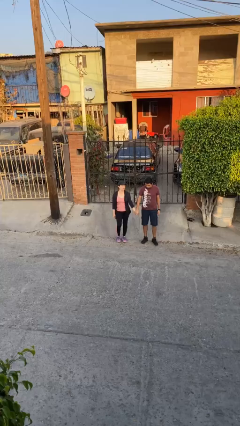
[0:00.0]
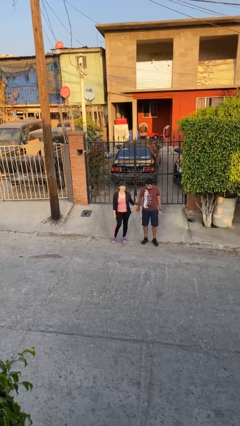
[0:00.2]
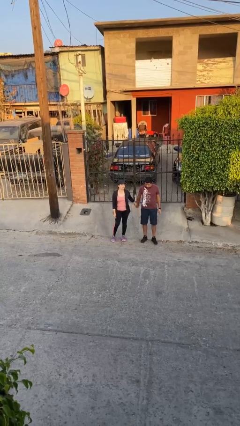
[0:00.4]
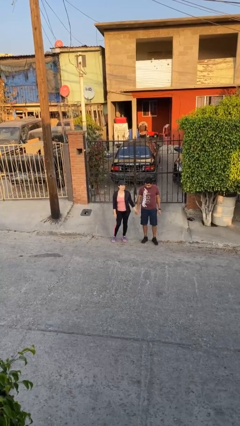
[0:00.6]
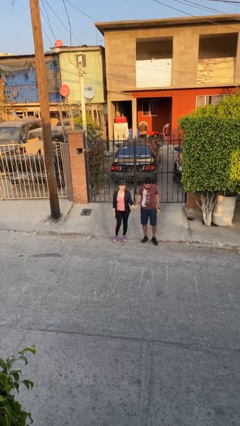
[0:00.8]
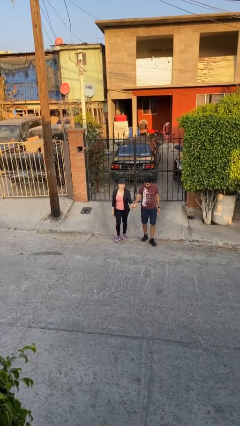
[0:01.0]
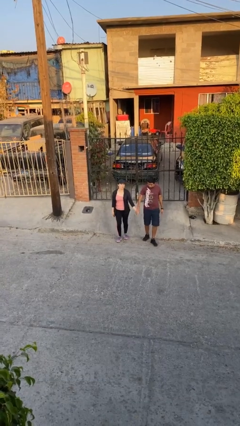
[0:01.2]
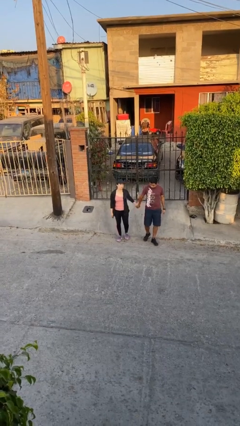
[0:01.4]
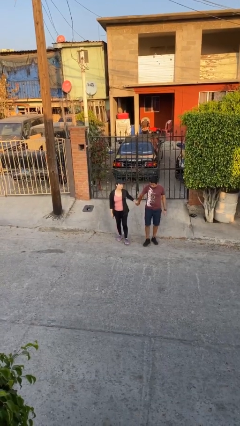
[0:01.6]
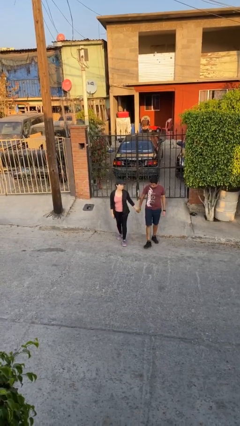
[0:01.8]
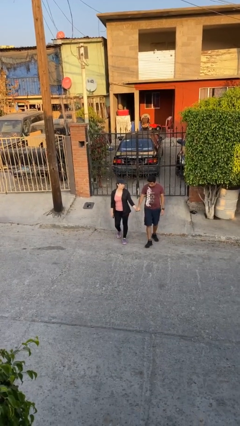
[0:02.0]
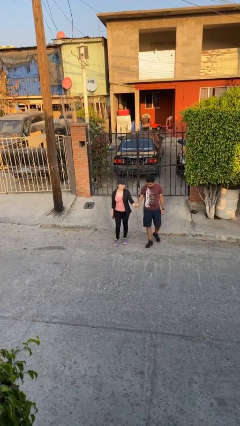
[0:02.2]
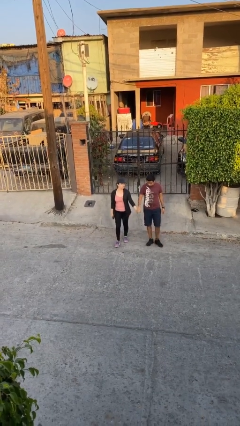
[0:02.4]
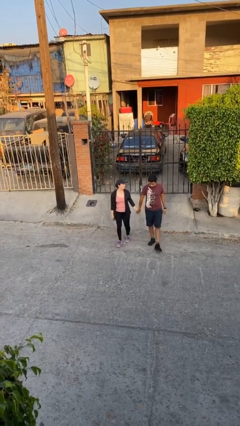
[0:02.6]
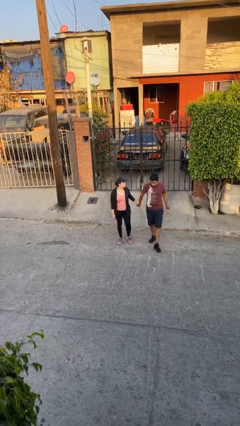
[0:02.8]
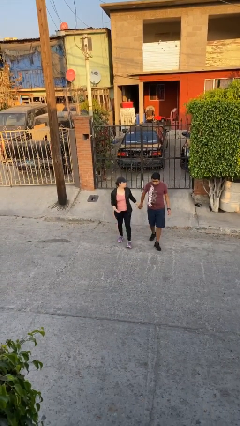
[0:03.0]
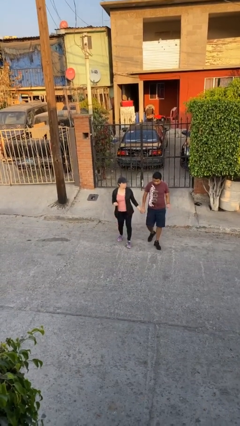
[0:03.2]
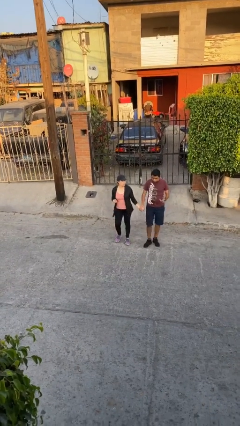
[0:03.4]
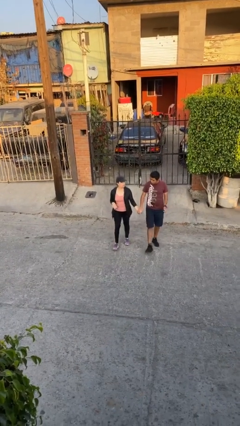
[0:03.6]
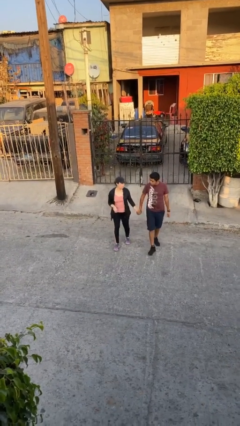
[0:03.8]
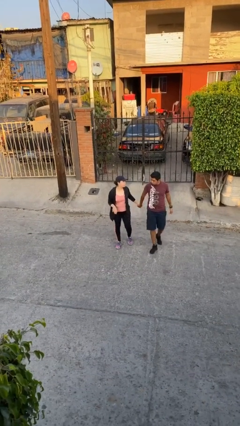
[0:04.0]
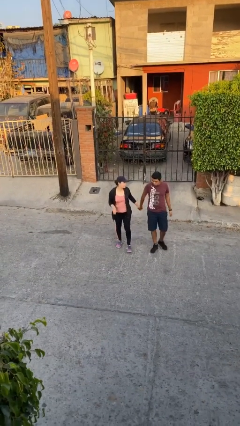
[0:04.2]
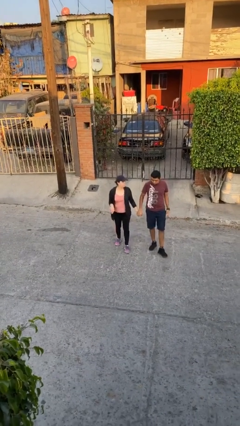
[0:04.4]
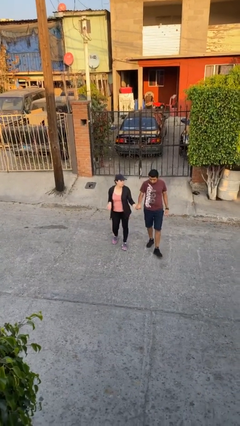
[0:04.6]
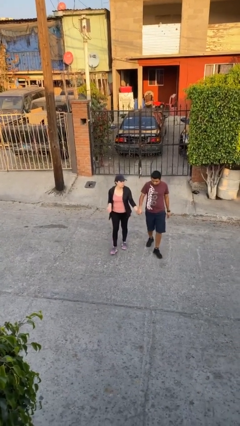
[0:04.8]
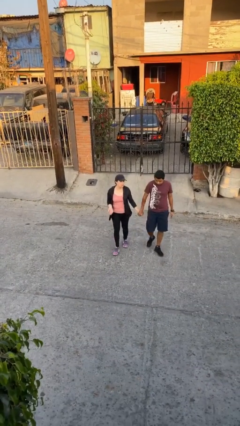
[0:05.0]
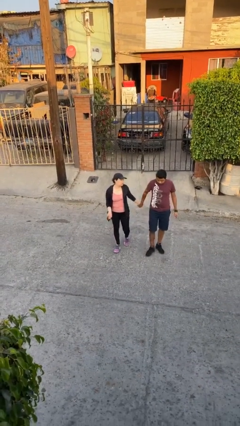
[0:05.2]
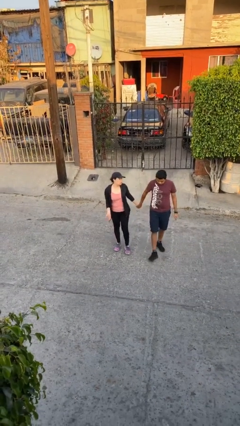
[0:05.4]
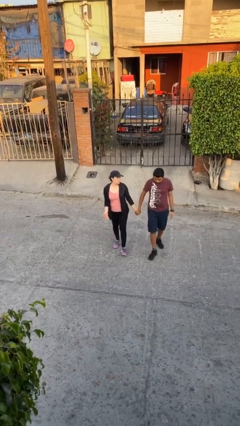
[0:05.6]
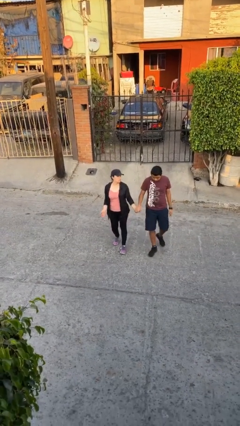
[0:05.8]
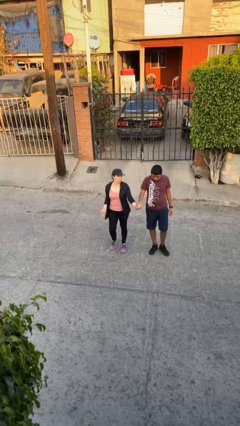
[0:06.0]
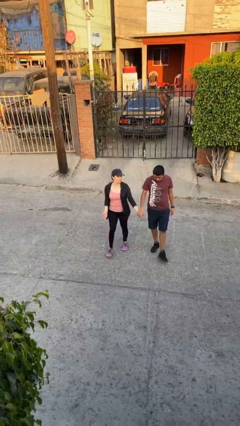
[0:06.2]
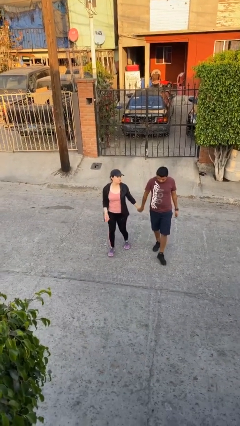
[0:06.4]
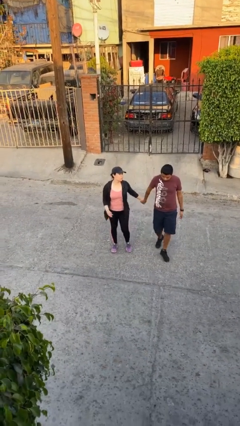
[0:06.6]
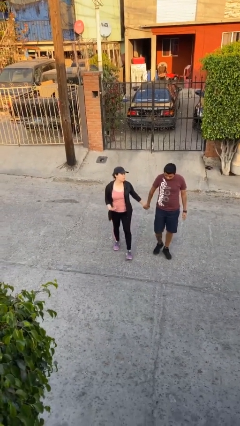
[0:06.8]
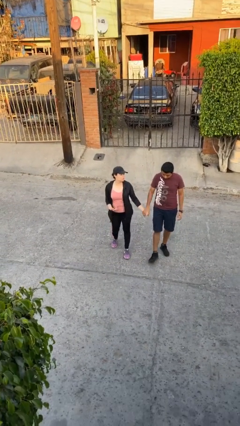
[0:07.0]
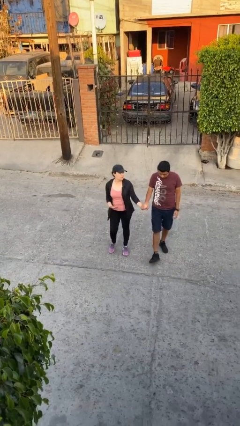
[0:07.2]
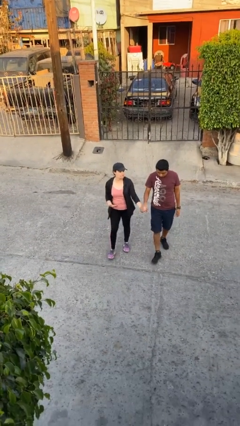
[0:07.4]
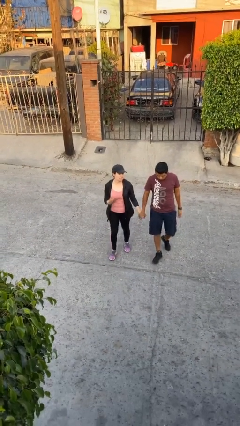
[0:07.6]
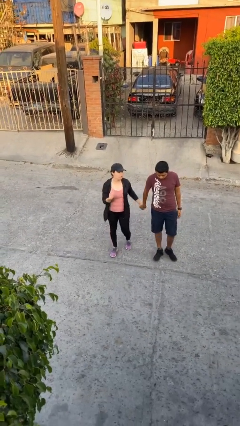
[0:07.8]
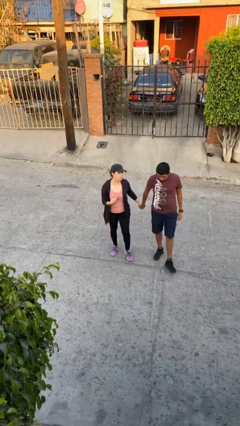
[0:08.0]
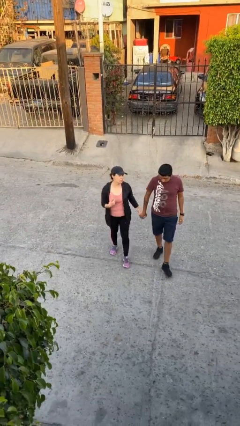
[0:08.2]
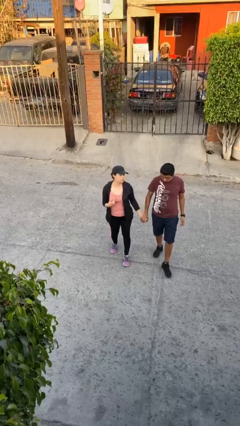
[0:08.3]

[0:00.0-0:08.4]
person holds hand

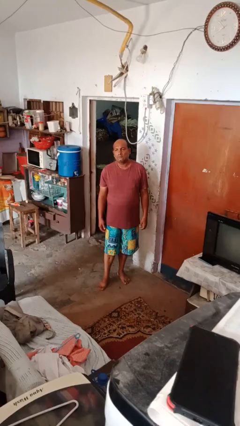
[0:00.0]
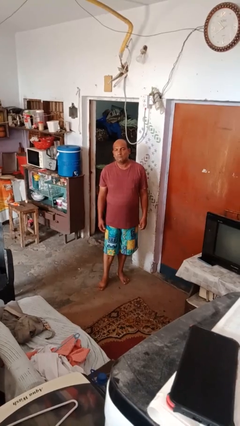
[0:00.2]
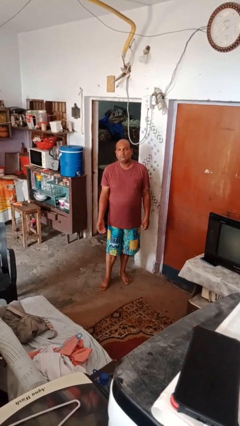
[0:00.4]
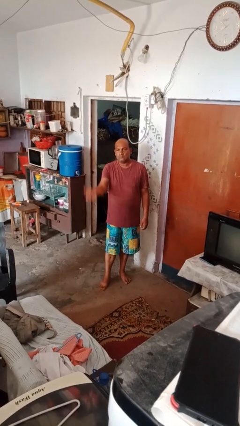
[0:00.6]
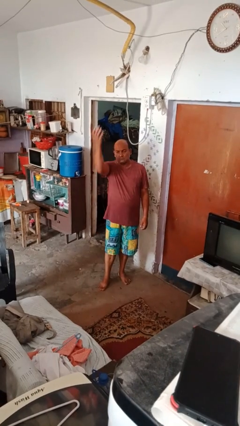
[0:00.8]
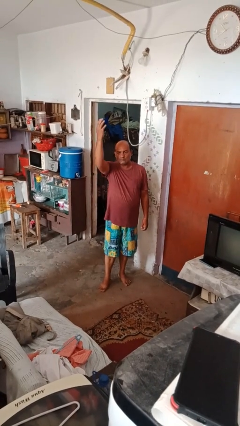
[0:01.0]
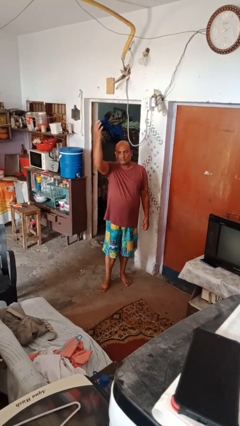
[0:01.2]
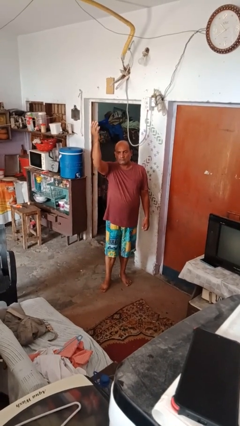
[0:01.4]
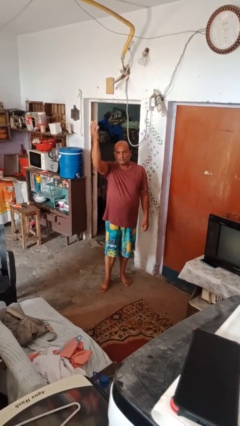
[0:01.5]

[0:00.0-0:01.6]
person gestures swipe up

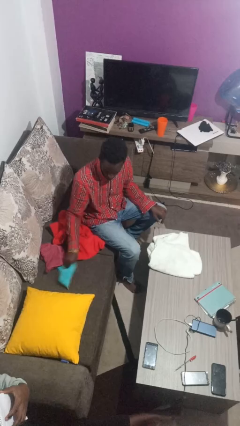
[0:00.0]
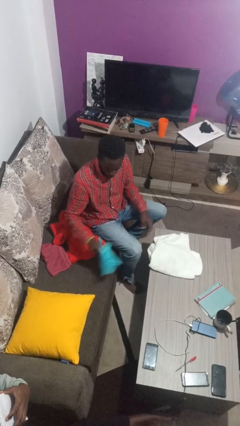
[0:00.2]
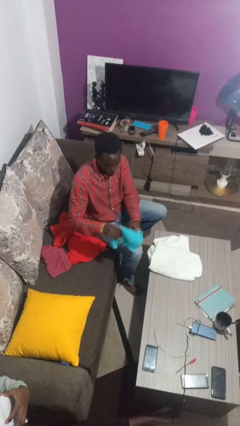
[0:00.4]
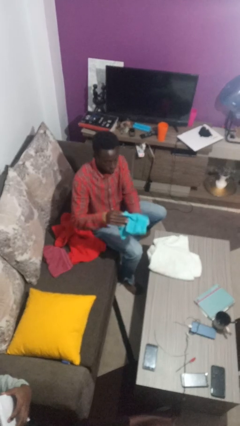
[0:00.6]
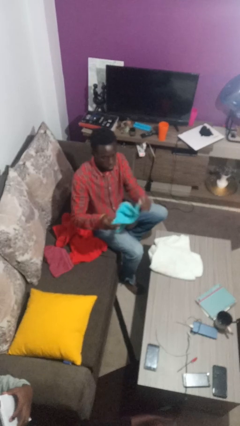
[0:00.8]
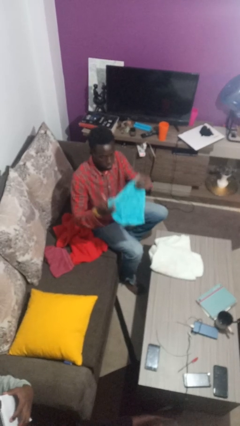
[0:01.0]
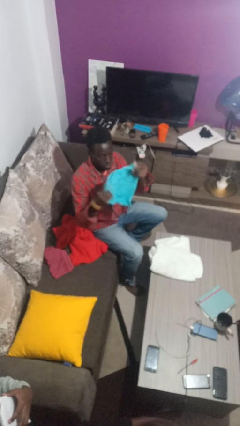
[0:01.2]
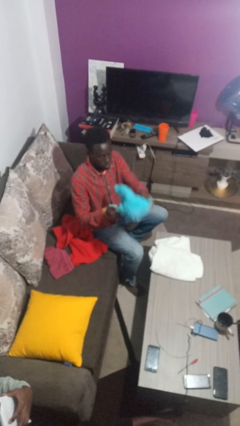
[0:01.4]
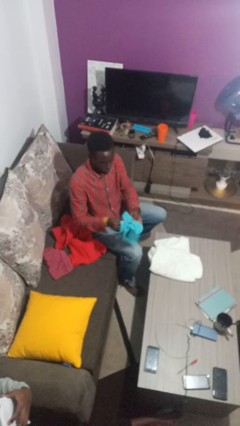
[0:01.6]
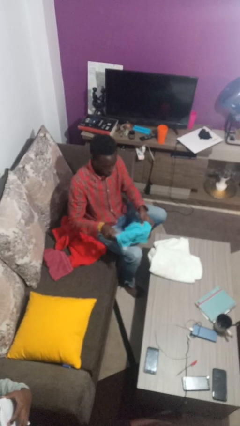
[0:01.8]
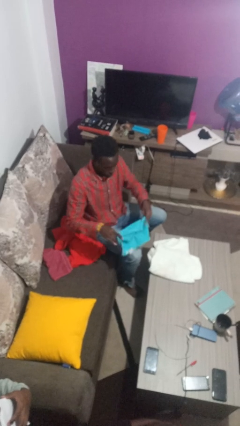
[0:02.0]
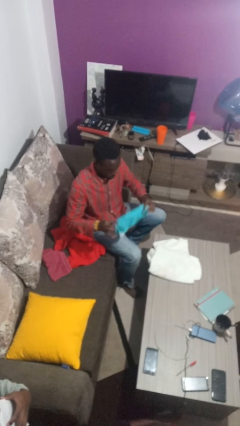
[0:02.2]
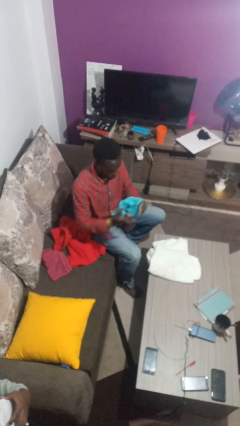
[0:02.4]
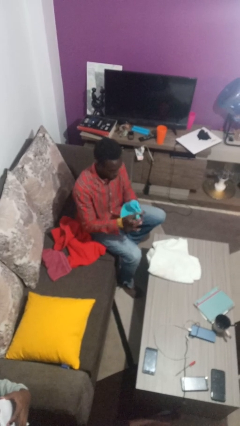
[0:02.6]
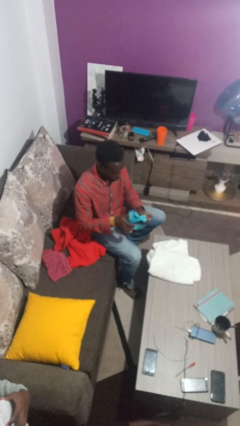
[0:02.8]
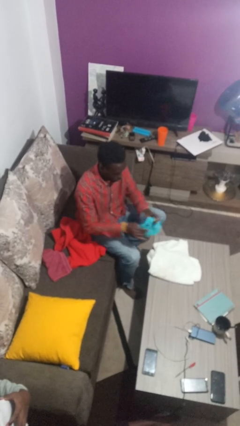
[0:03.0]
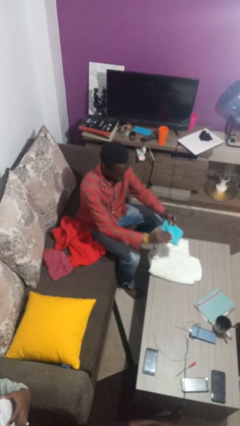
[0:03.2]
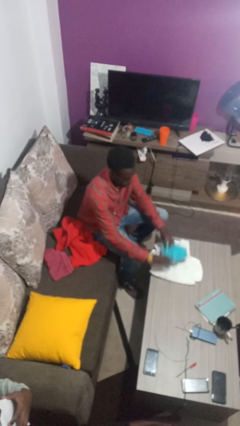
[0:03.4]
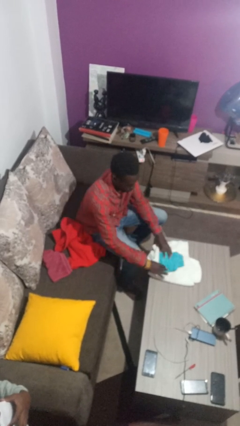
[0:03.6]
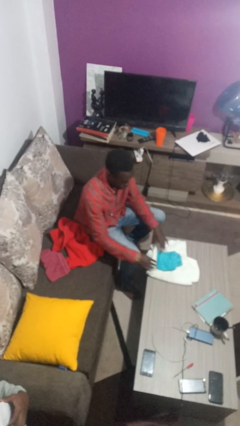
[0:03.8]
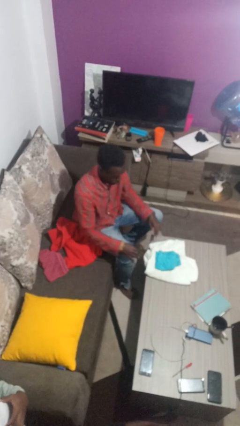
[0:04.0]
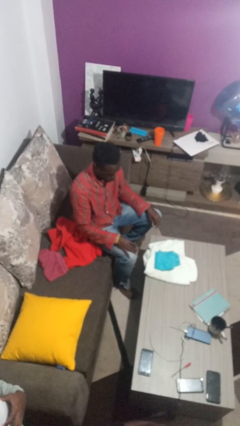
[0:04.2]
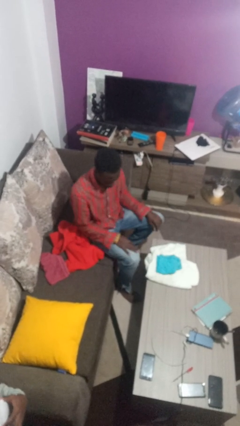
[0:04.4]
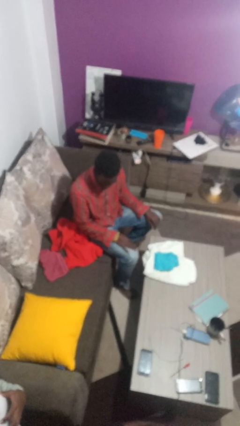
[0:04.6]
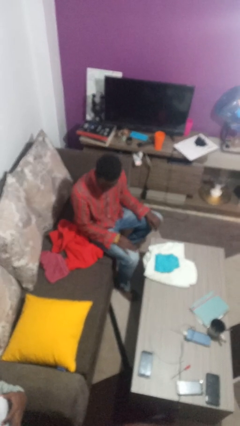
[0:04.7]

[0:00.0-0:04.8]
person folds towel

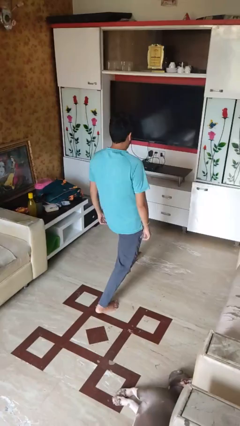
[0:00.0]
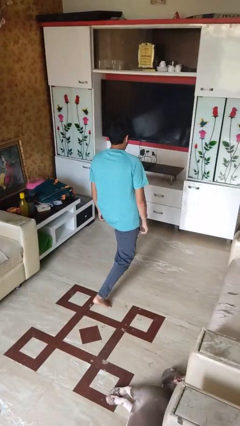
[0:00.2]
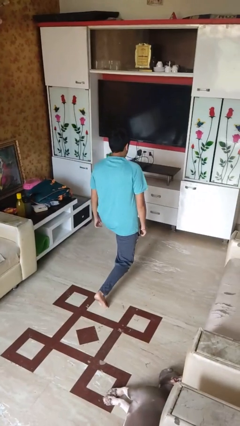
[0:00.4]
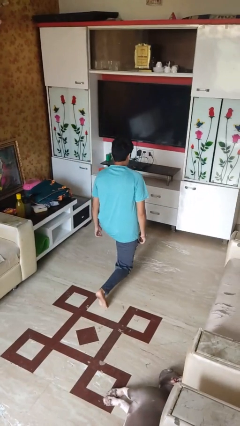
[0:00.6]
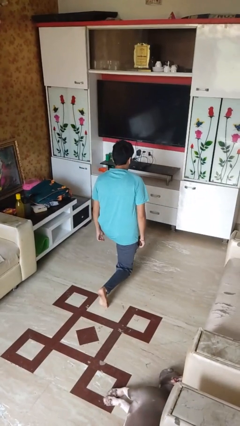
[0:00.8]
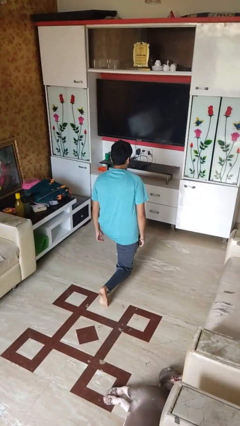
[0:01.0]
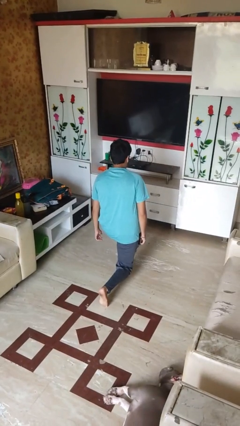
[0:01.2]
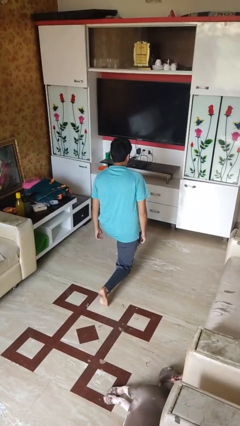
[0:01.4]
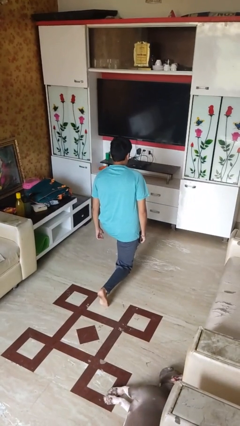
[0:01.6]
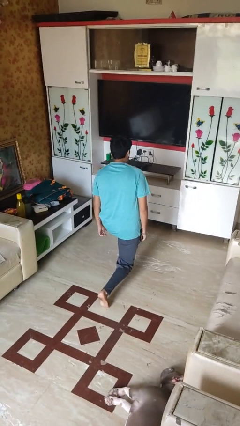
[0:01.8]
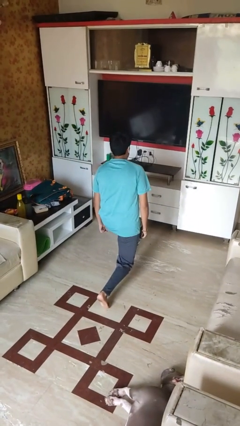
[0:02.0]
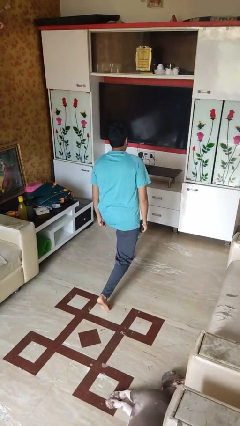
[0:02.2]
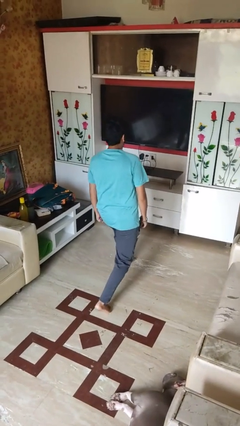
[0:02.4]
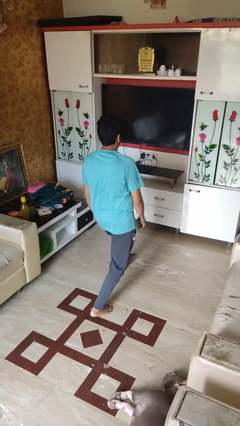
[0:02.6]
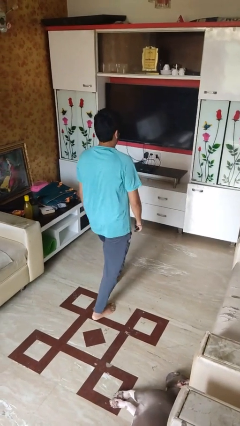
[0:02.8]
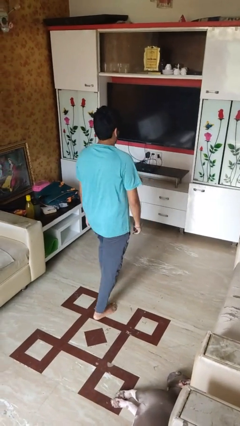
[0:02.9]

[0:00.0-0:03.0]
person exercises with lunges

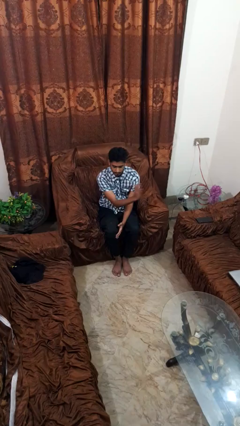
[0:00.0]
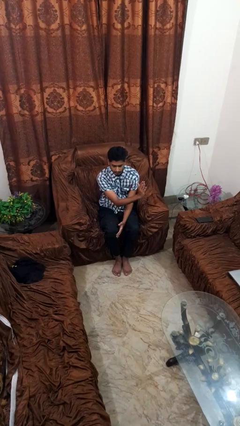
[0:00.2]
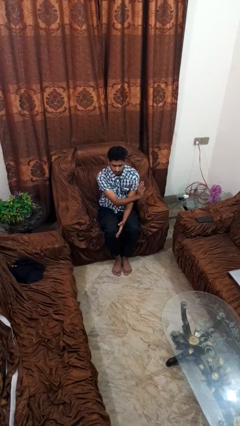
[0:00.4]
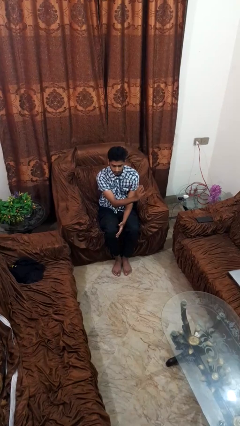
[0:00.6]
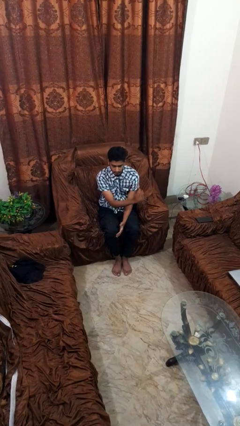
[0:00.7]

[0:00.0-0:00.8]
person gestures swipe left
